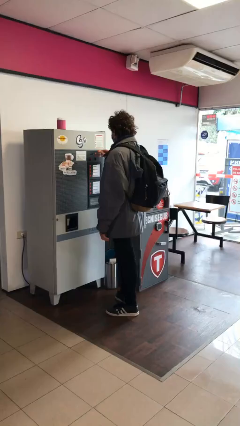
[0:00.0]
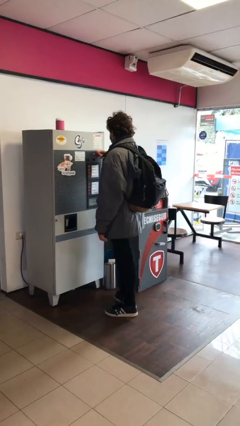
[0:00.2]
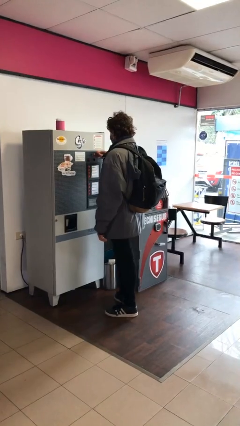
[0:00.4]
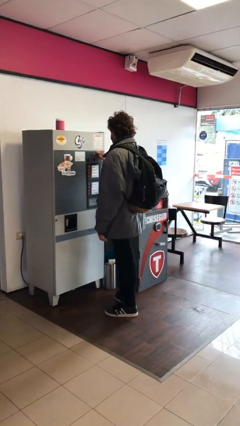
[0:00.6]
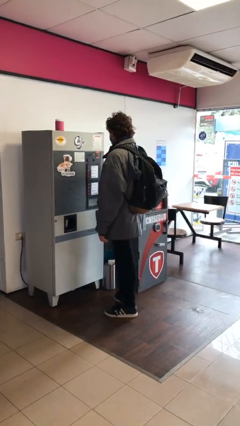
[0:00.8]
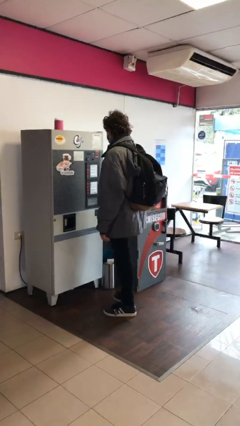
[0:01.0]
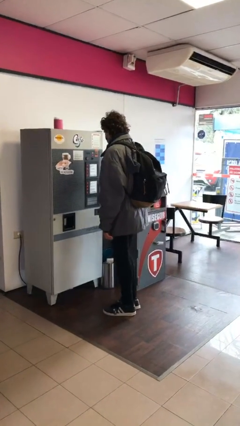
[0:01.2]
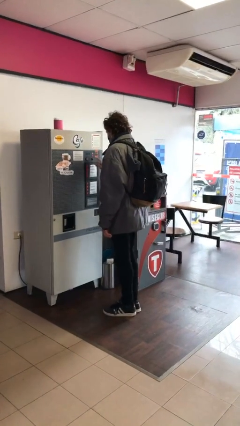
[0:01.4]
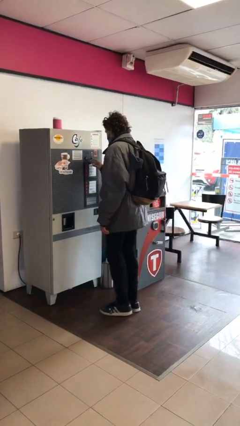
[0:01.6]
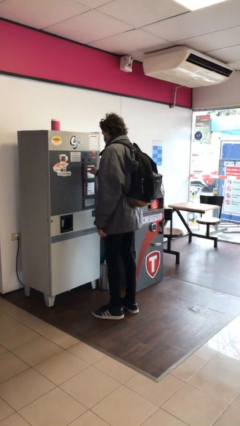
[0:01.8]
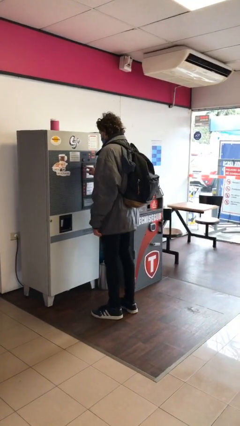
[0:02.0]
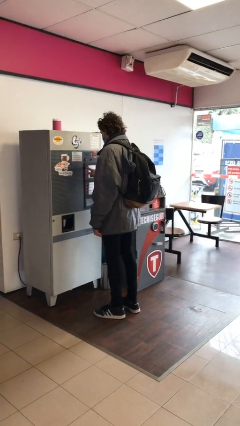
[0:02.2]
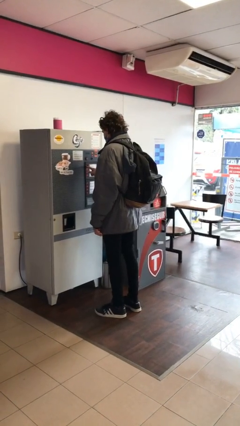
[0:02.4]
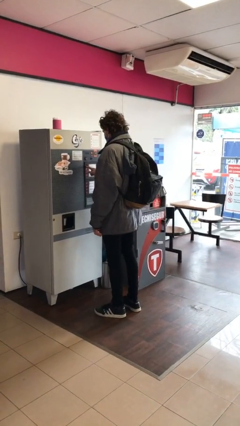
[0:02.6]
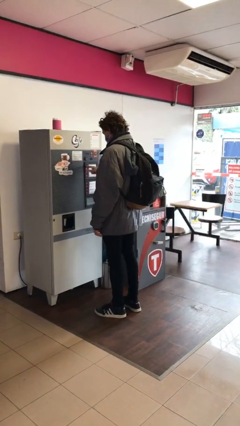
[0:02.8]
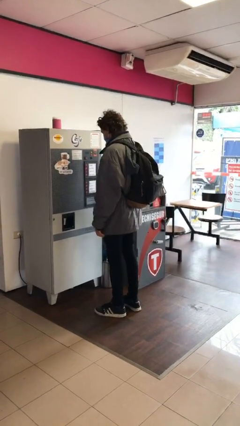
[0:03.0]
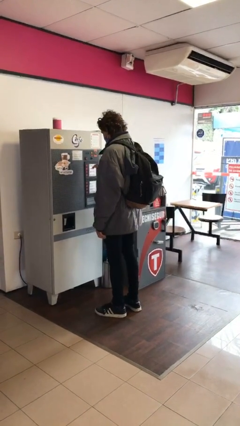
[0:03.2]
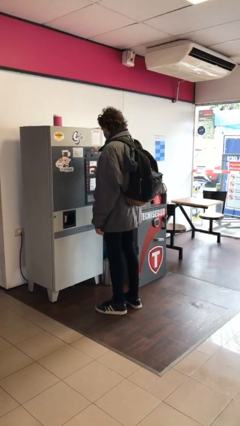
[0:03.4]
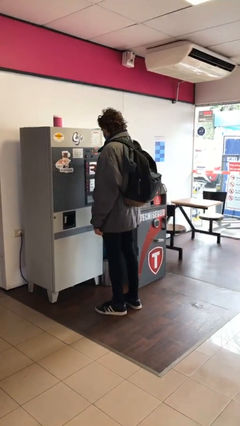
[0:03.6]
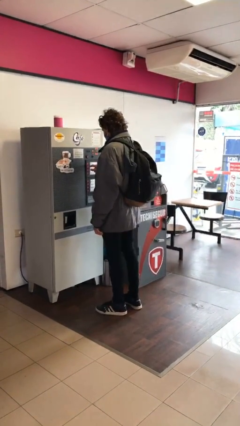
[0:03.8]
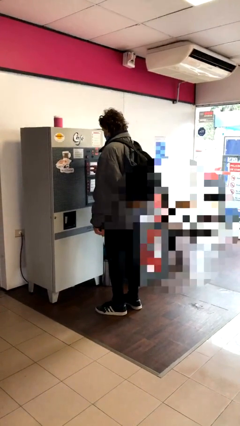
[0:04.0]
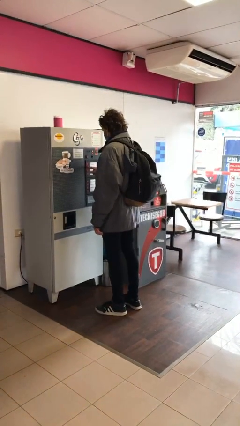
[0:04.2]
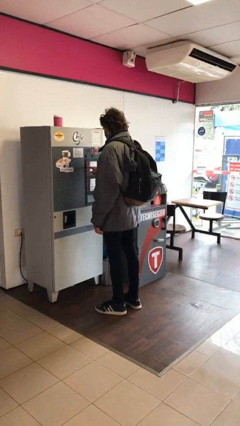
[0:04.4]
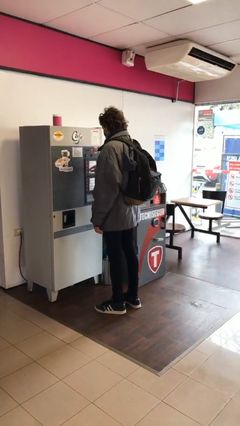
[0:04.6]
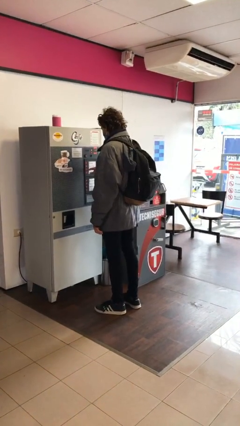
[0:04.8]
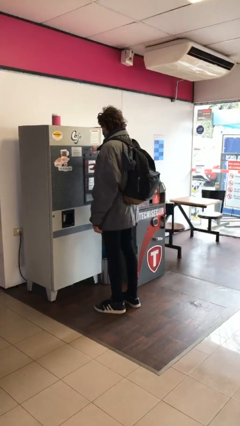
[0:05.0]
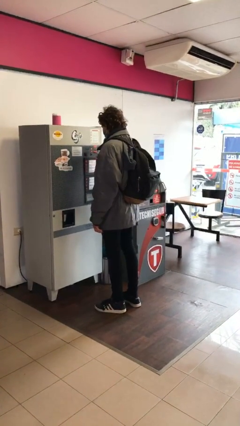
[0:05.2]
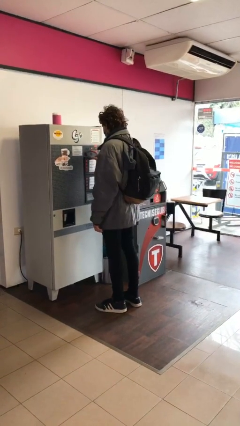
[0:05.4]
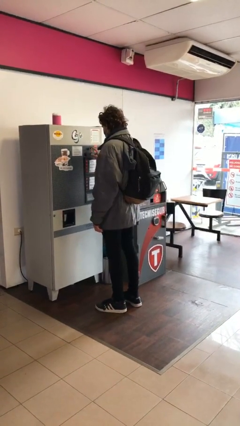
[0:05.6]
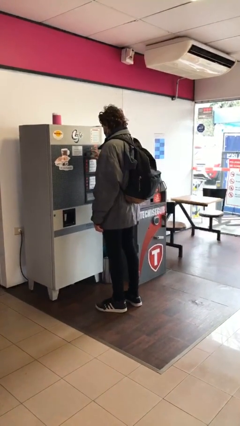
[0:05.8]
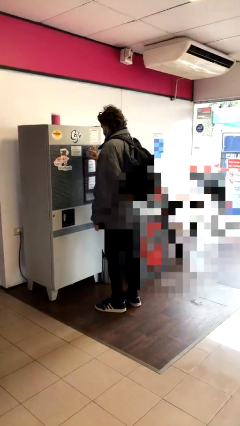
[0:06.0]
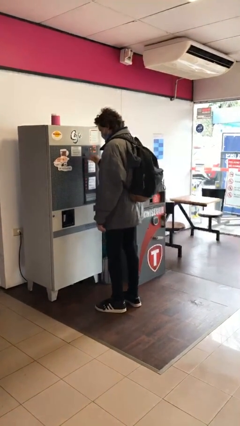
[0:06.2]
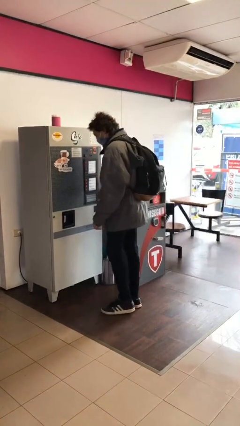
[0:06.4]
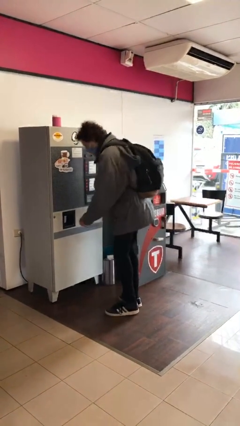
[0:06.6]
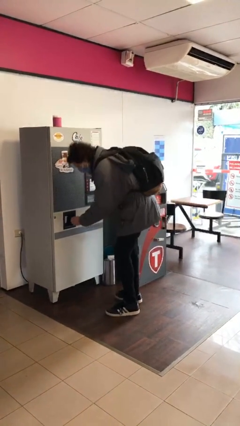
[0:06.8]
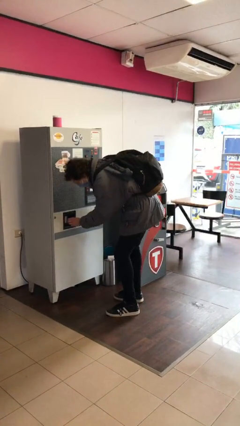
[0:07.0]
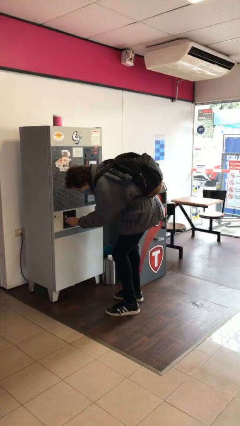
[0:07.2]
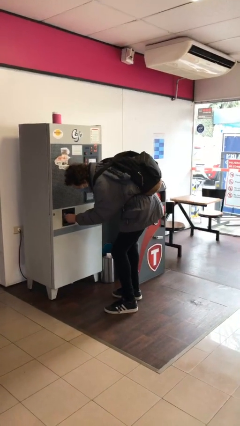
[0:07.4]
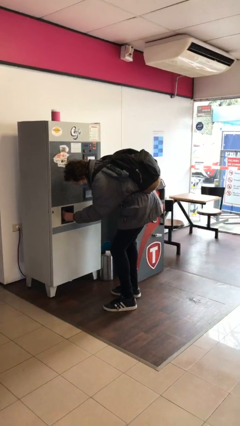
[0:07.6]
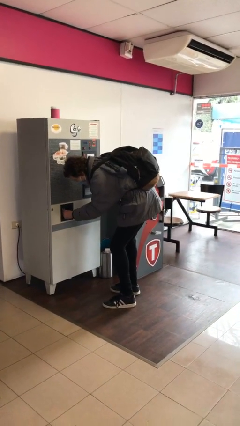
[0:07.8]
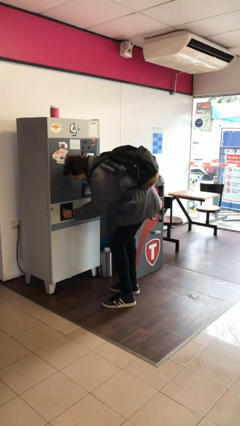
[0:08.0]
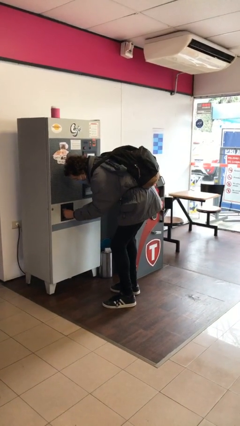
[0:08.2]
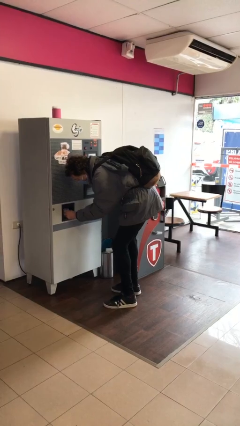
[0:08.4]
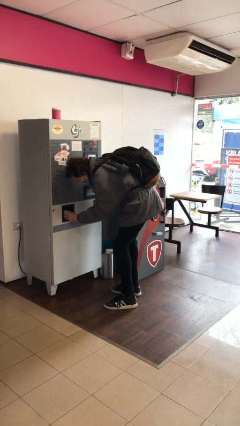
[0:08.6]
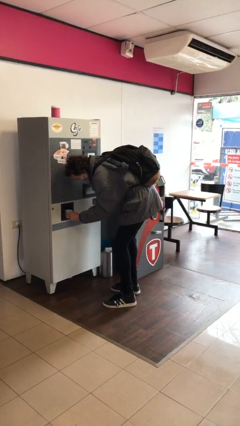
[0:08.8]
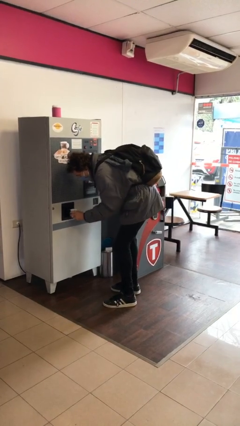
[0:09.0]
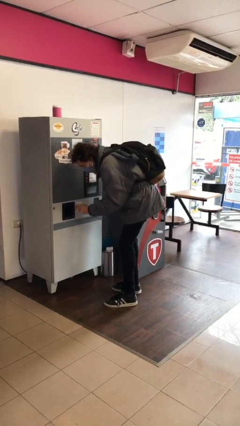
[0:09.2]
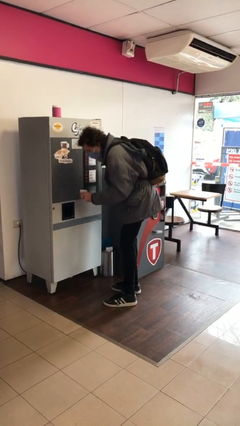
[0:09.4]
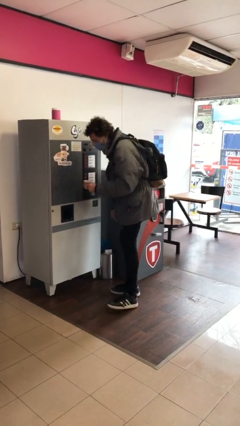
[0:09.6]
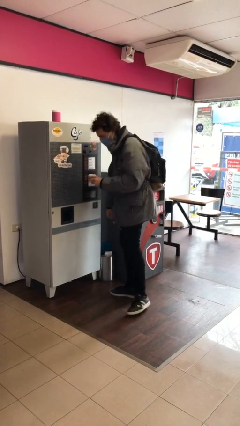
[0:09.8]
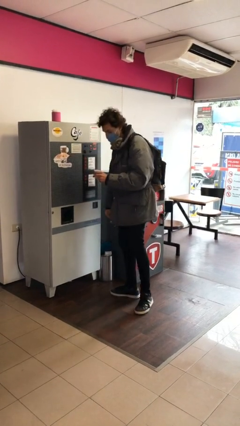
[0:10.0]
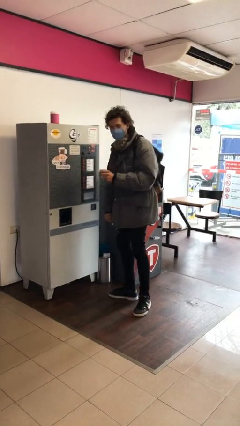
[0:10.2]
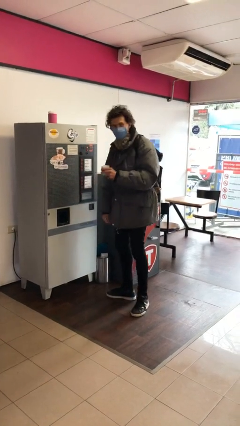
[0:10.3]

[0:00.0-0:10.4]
person purchases from machine

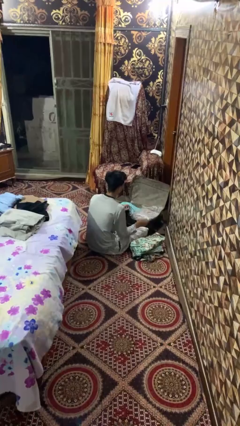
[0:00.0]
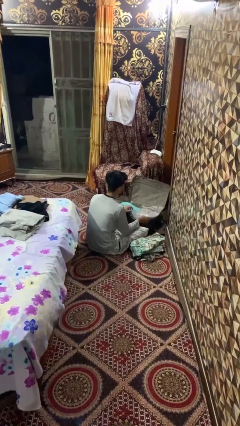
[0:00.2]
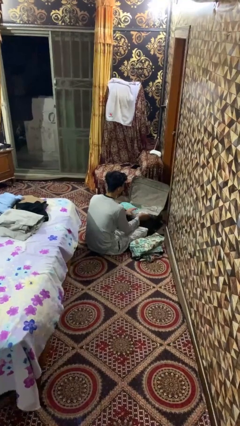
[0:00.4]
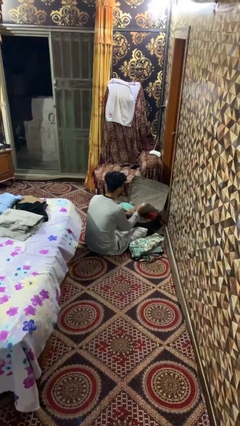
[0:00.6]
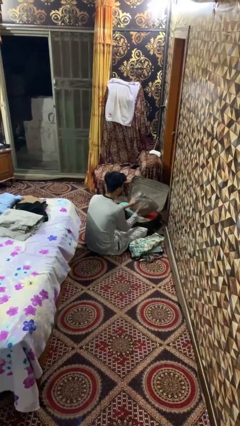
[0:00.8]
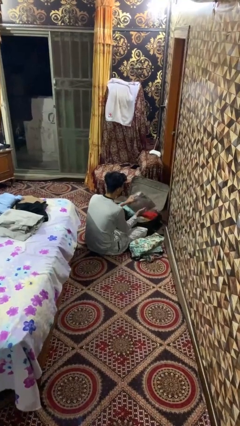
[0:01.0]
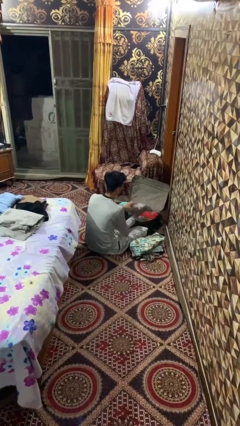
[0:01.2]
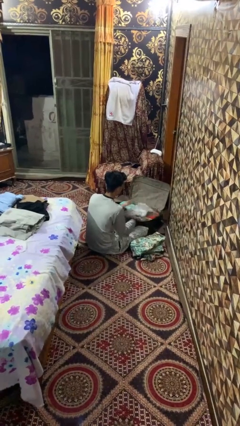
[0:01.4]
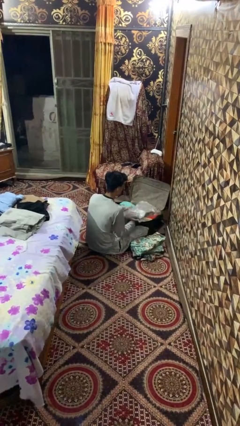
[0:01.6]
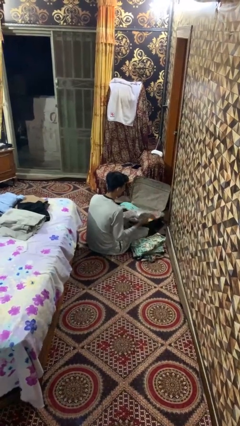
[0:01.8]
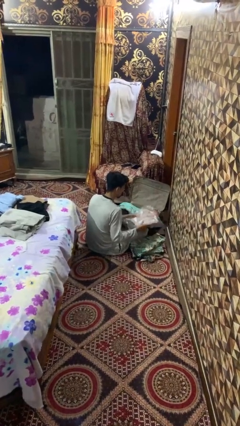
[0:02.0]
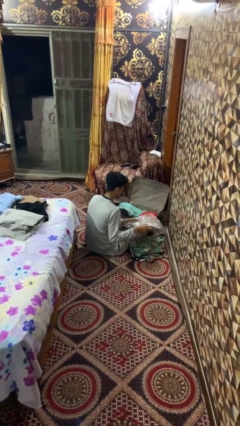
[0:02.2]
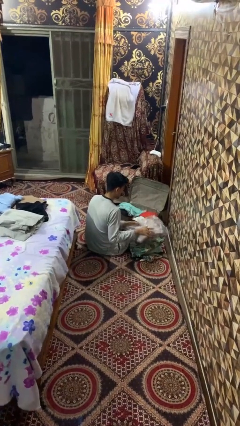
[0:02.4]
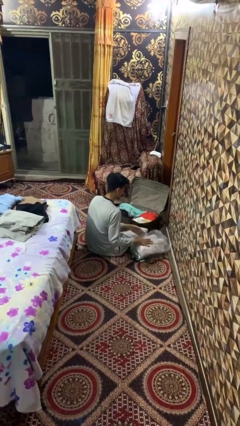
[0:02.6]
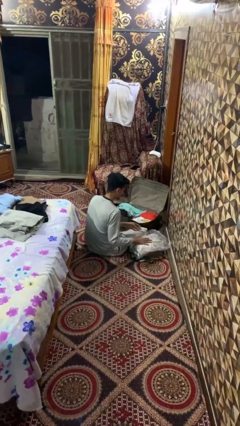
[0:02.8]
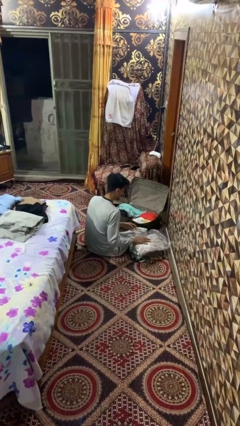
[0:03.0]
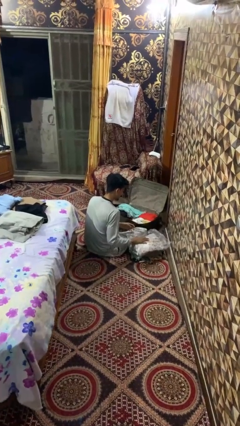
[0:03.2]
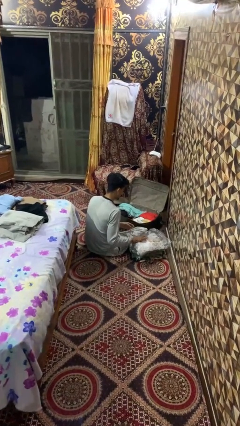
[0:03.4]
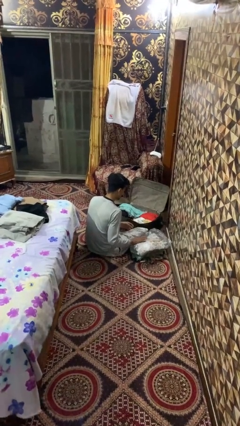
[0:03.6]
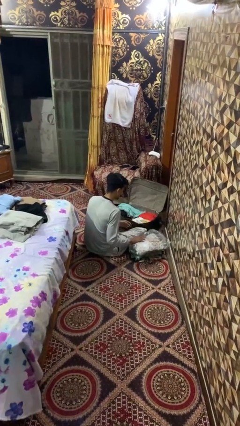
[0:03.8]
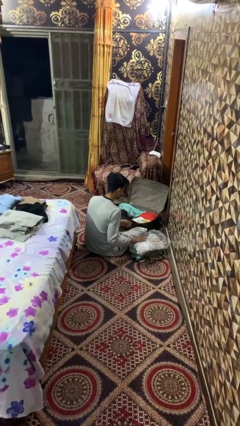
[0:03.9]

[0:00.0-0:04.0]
person unloads clothes from suitcase

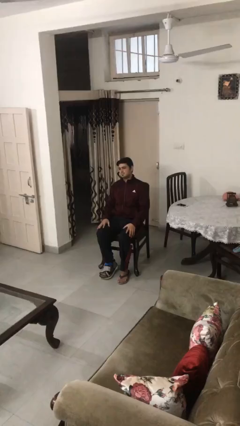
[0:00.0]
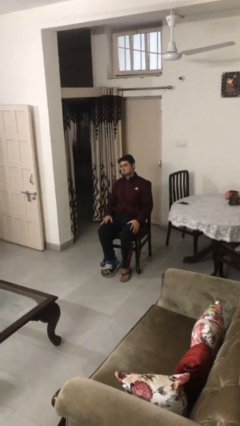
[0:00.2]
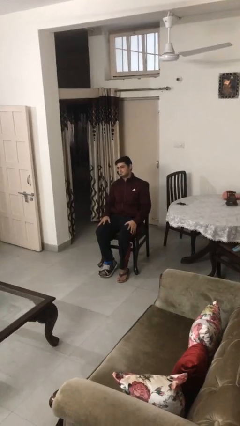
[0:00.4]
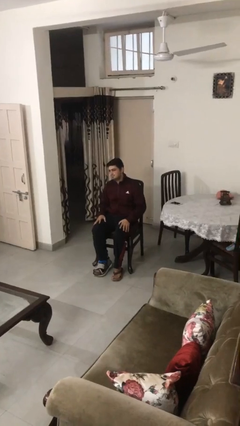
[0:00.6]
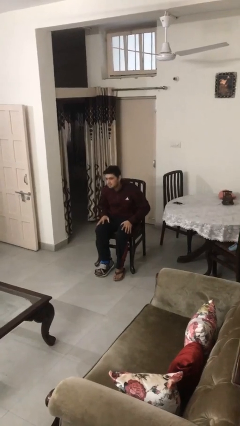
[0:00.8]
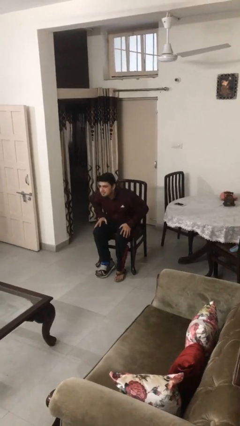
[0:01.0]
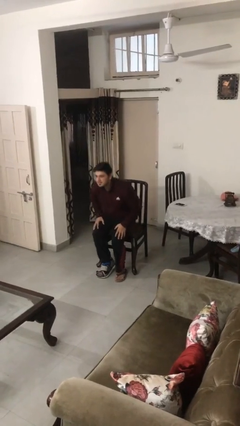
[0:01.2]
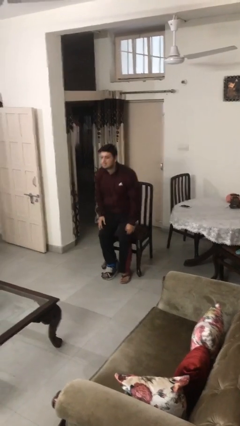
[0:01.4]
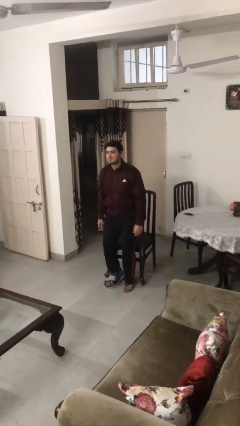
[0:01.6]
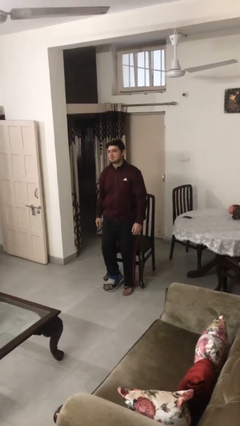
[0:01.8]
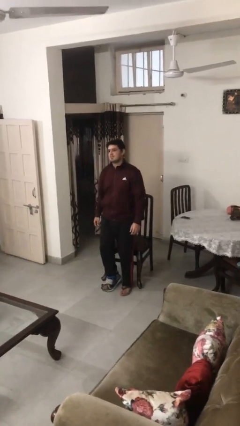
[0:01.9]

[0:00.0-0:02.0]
person stands up

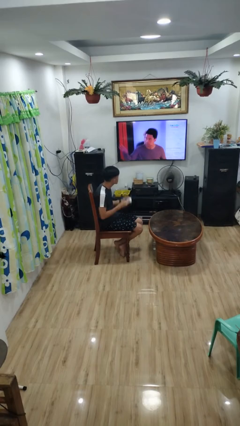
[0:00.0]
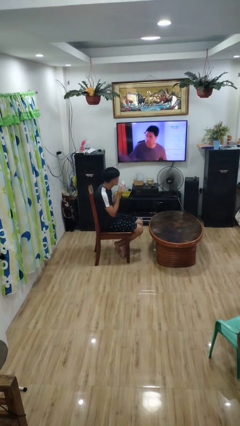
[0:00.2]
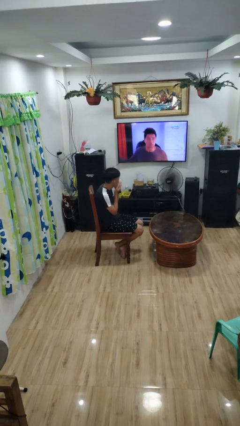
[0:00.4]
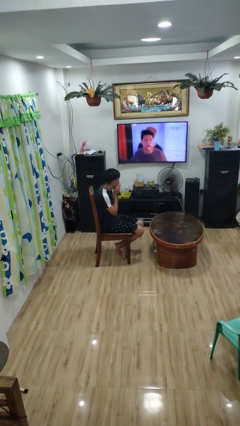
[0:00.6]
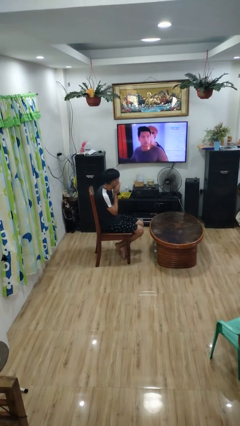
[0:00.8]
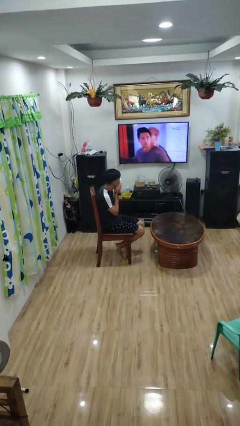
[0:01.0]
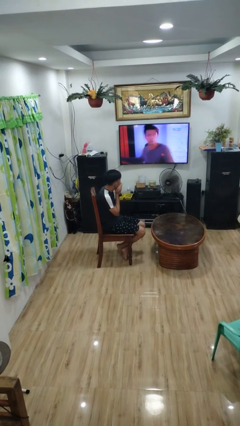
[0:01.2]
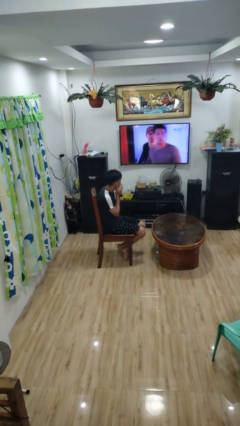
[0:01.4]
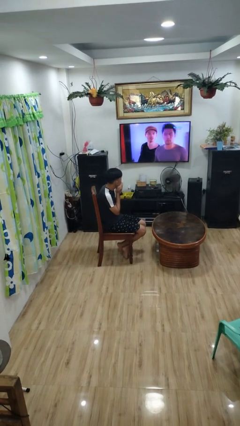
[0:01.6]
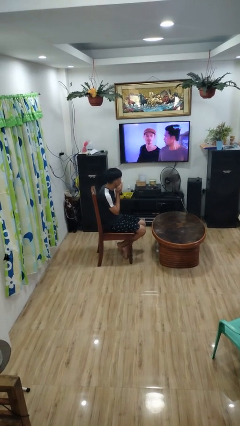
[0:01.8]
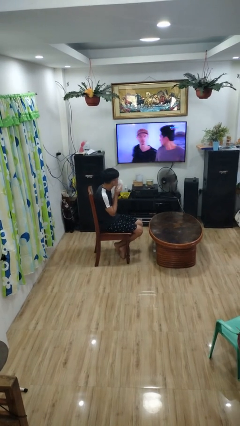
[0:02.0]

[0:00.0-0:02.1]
person wipes mouth with napkin
